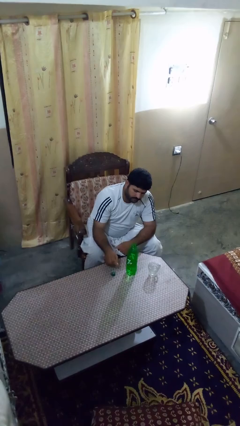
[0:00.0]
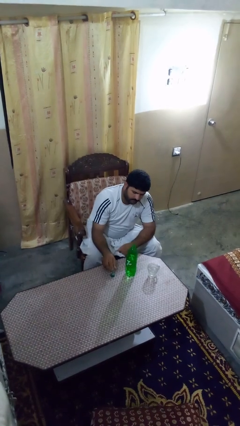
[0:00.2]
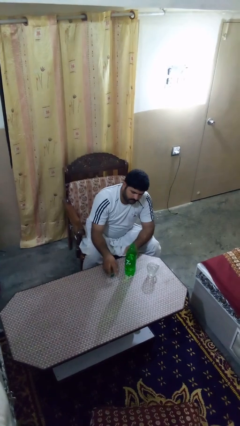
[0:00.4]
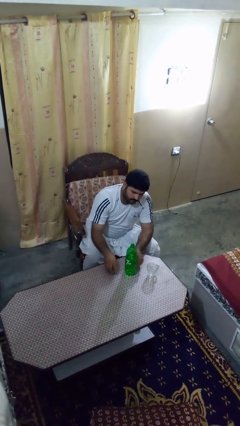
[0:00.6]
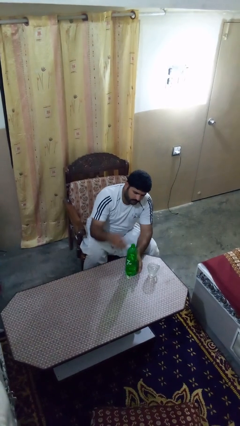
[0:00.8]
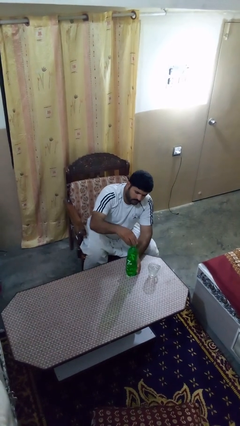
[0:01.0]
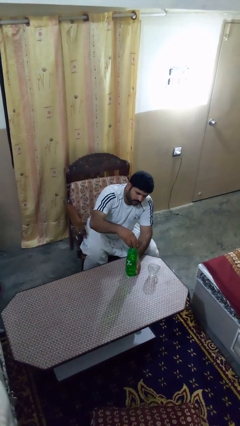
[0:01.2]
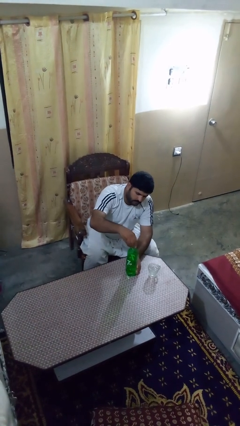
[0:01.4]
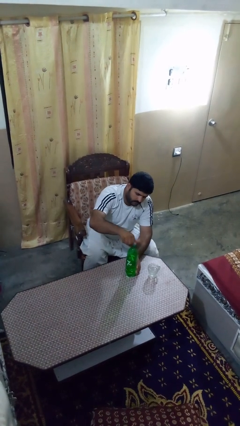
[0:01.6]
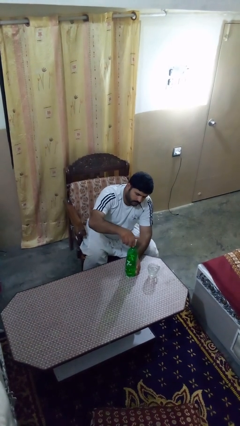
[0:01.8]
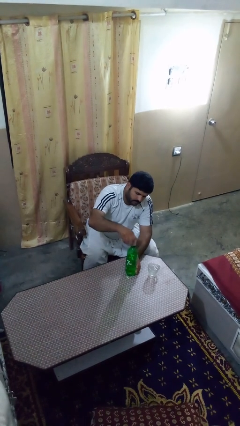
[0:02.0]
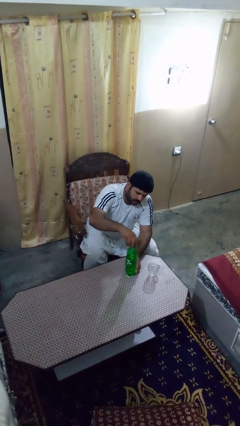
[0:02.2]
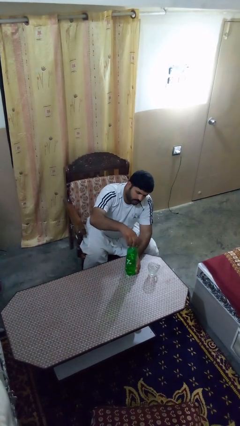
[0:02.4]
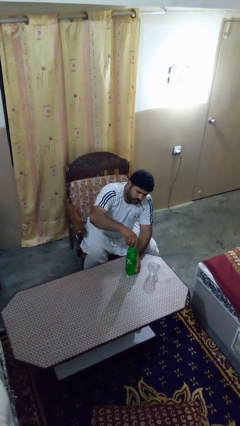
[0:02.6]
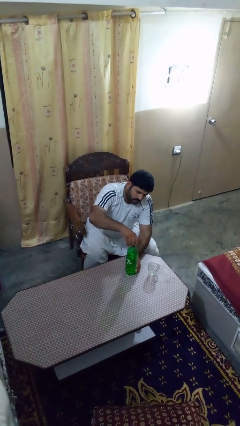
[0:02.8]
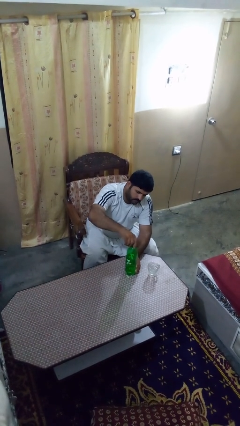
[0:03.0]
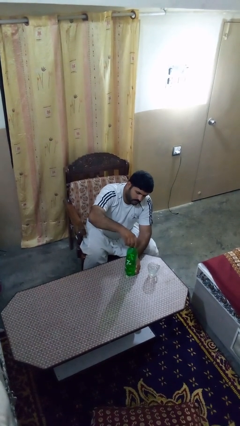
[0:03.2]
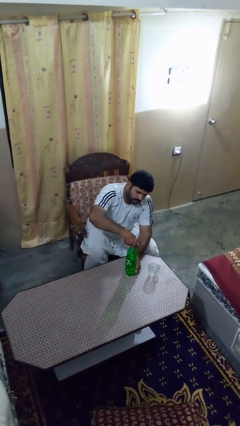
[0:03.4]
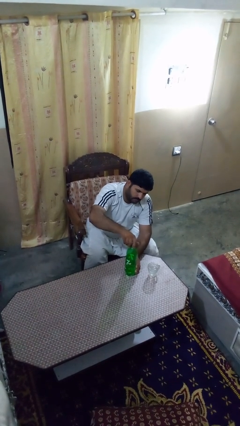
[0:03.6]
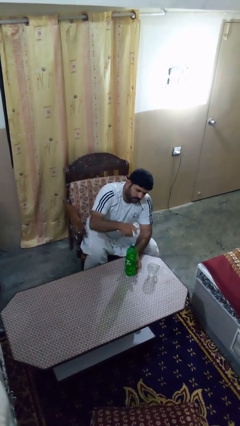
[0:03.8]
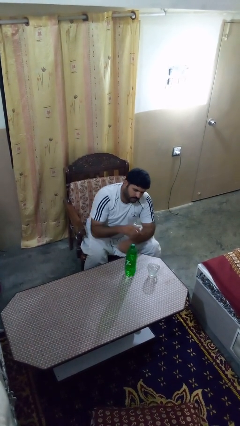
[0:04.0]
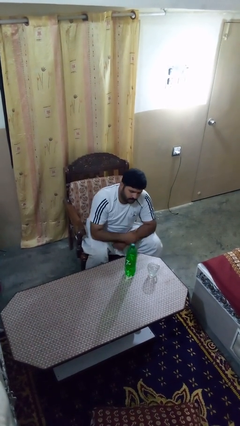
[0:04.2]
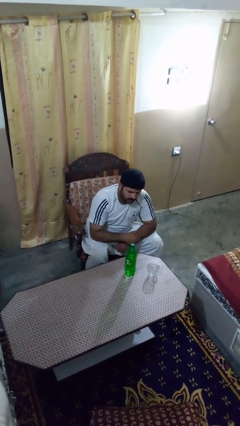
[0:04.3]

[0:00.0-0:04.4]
person screws lid to bottle

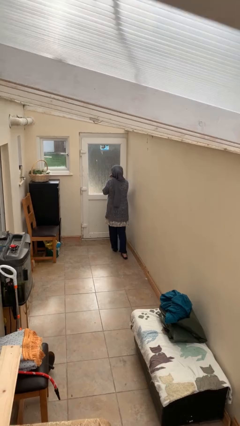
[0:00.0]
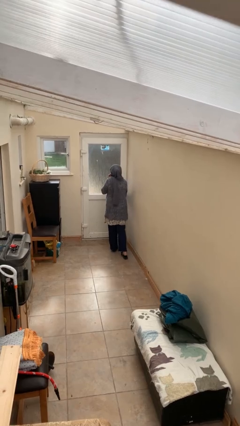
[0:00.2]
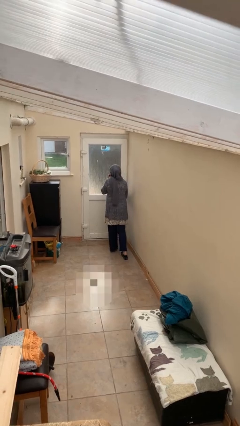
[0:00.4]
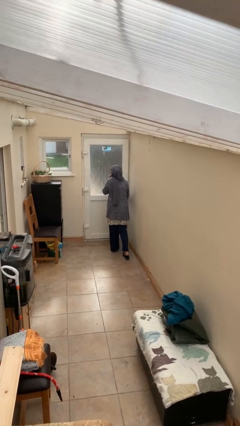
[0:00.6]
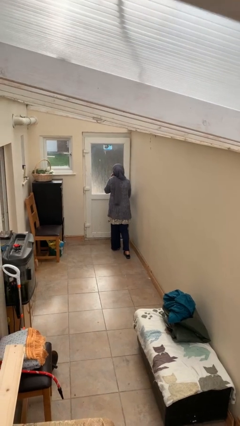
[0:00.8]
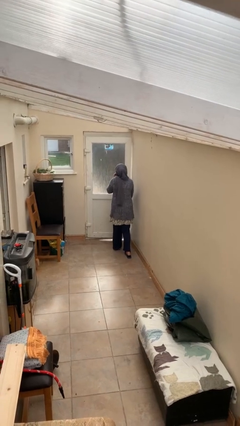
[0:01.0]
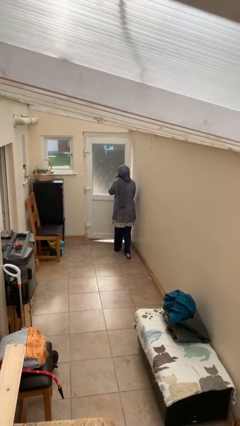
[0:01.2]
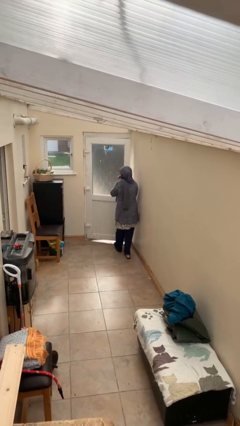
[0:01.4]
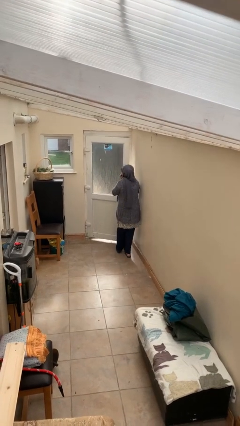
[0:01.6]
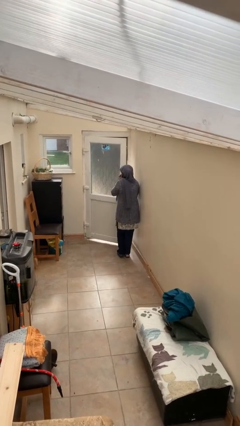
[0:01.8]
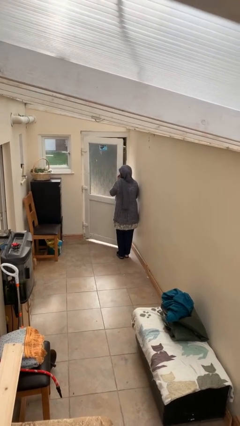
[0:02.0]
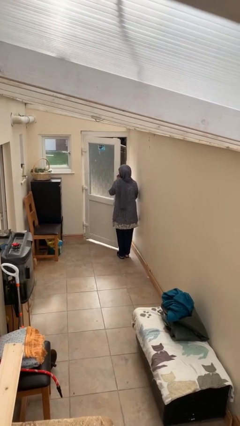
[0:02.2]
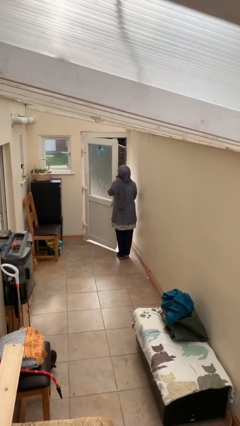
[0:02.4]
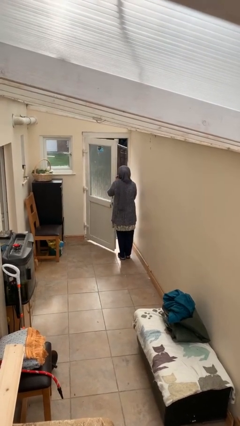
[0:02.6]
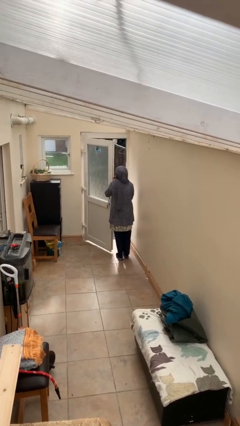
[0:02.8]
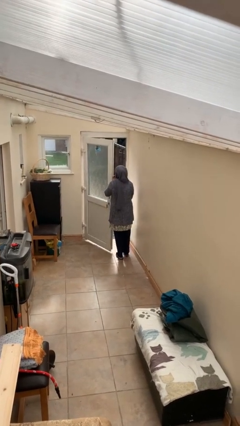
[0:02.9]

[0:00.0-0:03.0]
person opens facility door

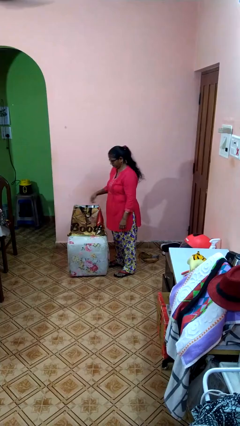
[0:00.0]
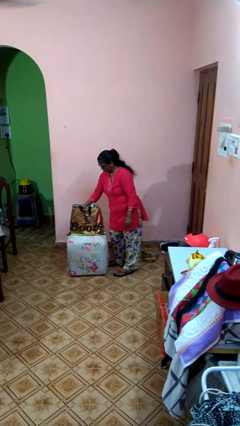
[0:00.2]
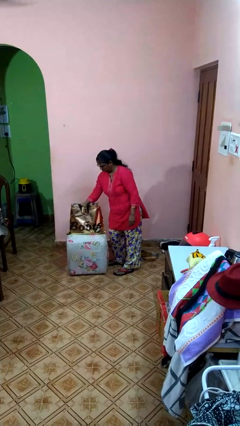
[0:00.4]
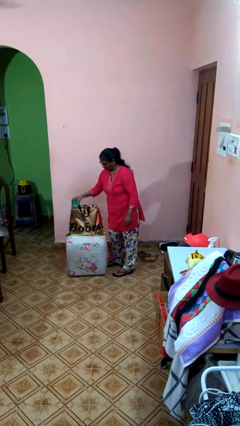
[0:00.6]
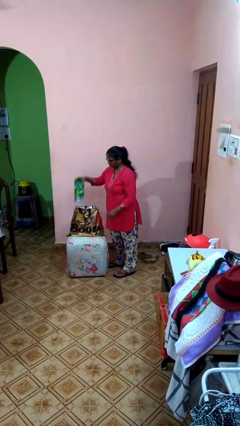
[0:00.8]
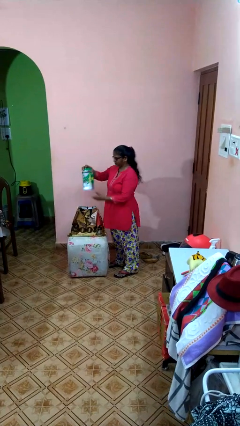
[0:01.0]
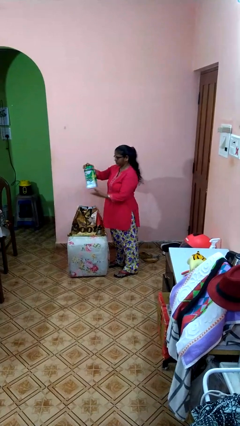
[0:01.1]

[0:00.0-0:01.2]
person takes object from bag

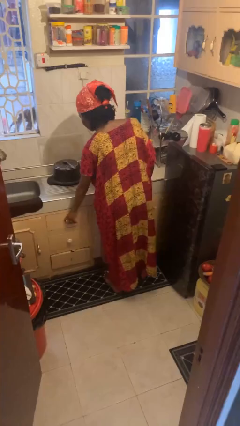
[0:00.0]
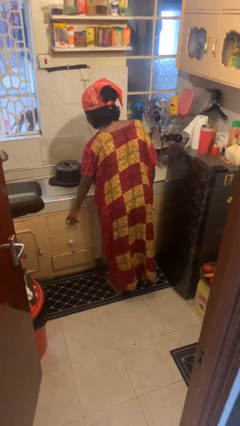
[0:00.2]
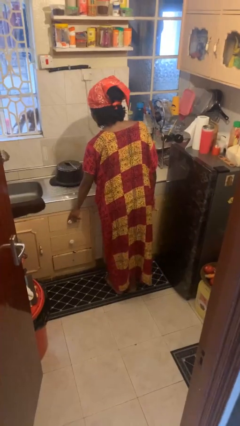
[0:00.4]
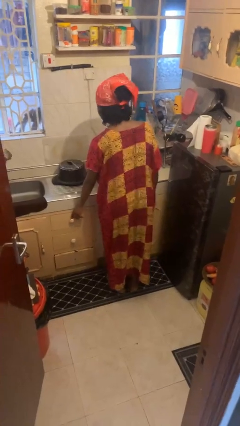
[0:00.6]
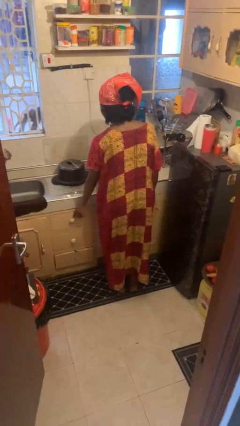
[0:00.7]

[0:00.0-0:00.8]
person closes kitchen drawer

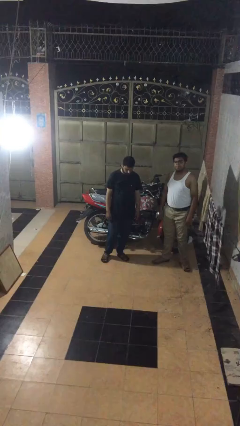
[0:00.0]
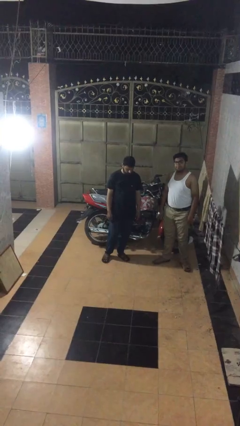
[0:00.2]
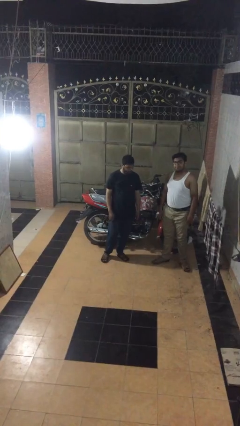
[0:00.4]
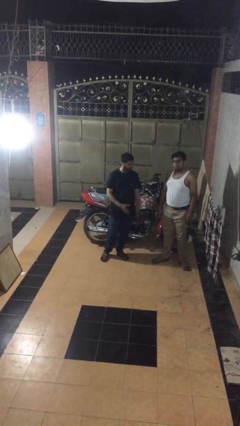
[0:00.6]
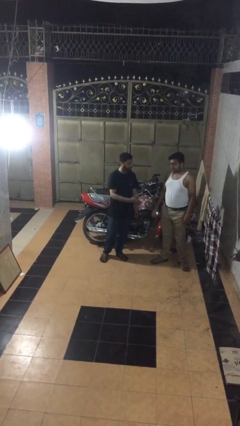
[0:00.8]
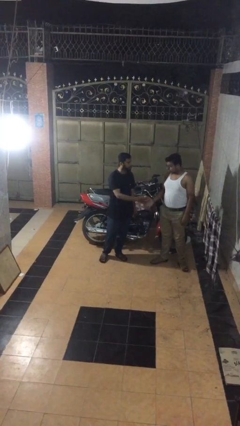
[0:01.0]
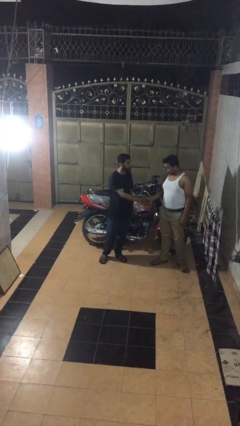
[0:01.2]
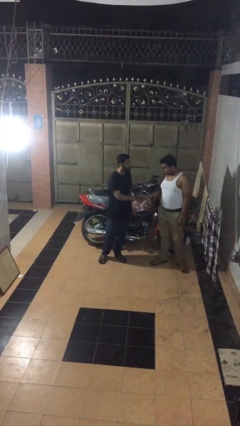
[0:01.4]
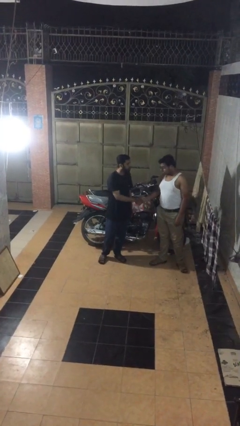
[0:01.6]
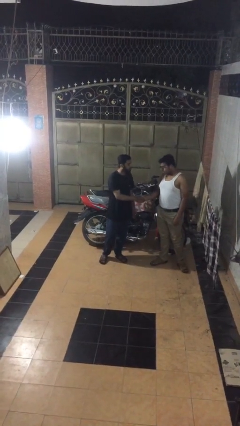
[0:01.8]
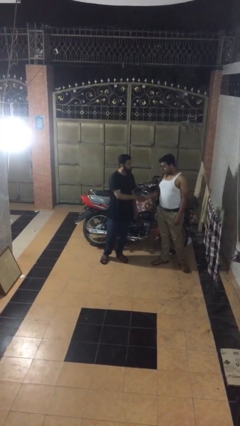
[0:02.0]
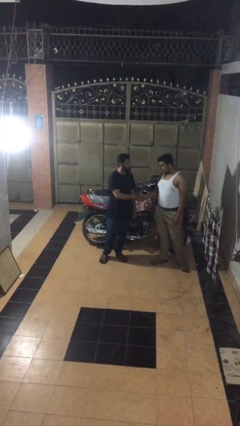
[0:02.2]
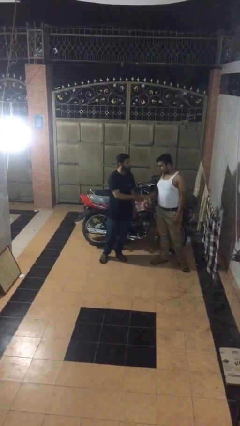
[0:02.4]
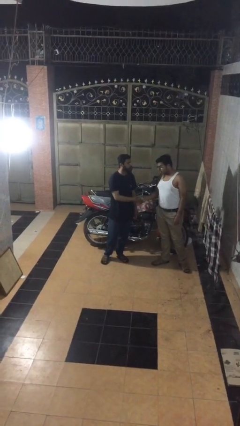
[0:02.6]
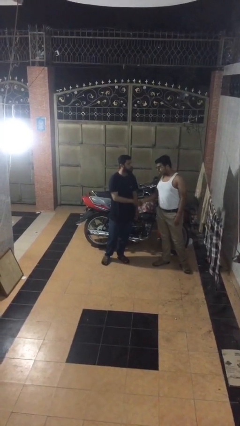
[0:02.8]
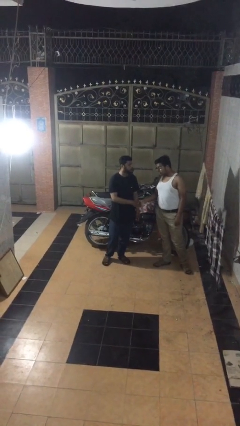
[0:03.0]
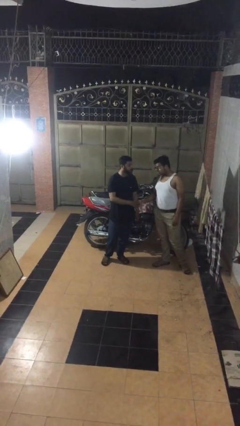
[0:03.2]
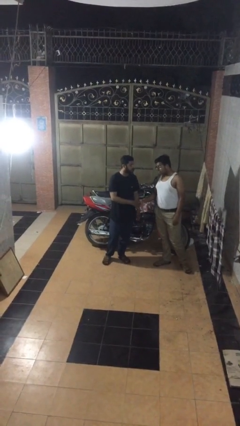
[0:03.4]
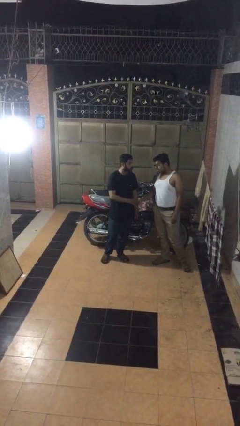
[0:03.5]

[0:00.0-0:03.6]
person shakes hand

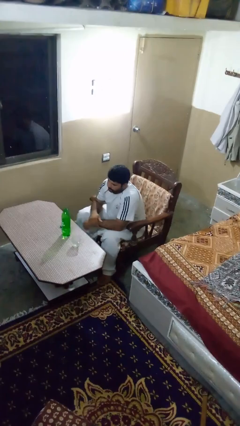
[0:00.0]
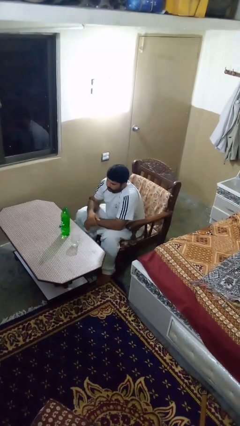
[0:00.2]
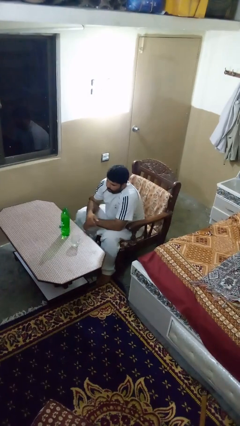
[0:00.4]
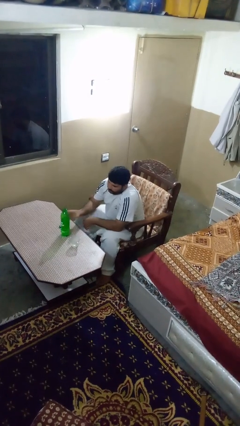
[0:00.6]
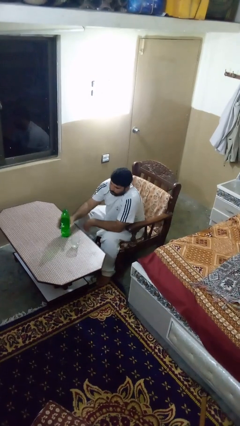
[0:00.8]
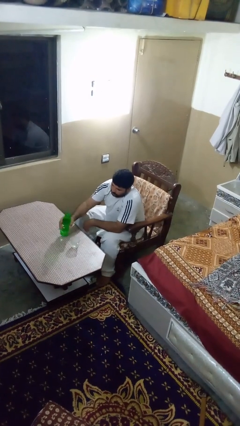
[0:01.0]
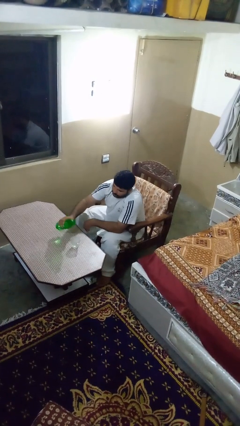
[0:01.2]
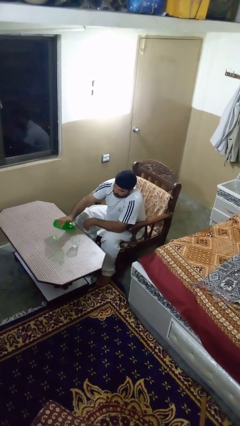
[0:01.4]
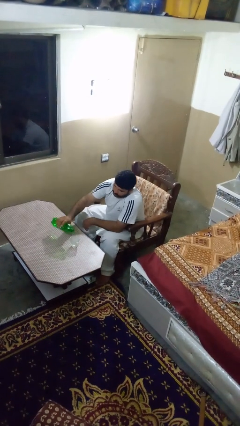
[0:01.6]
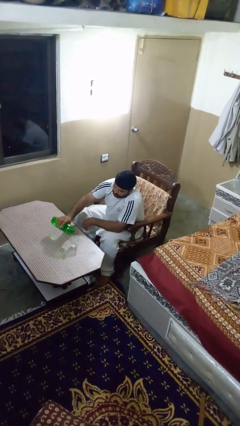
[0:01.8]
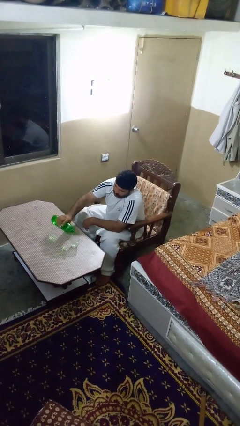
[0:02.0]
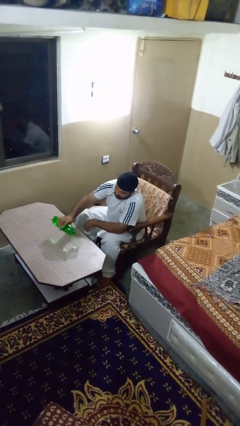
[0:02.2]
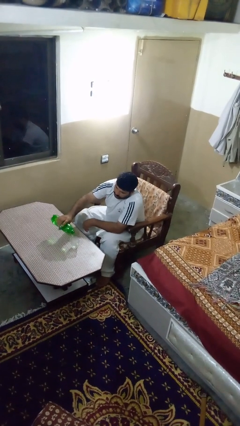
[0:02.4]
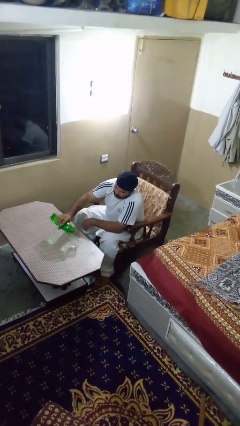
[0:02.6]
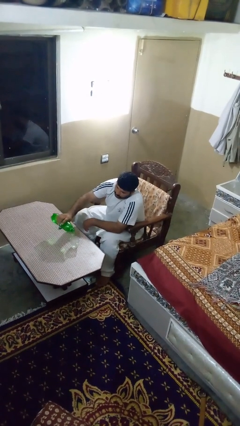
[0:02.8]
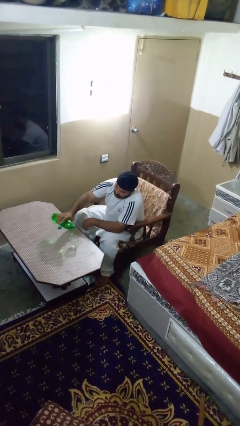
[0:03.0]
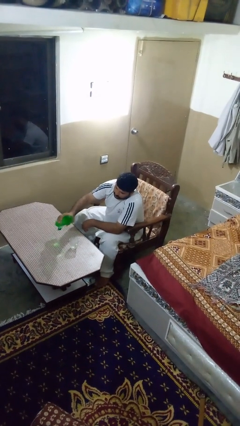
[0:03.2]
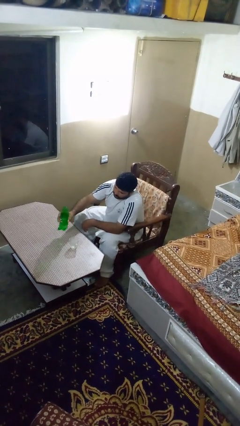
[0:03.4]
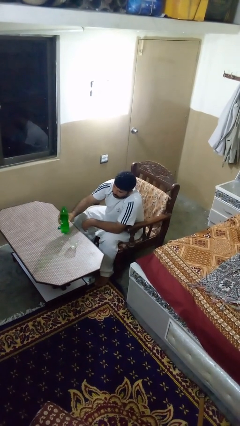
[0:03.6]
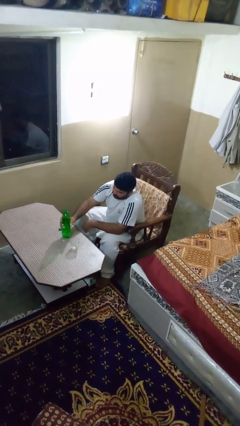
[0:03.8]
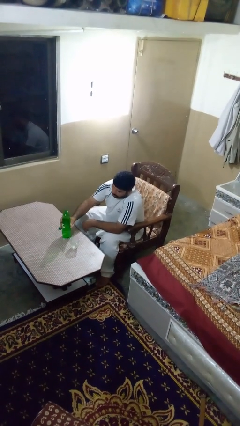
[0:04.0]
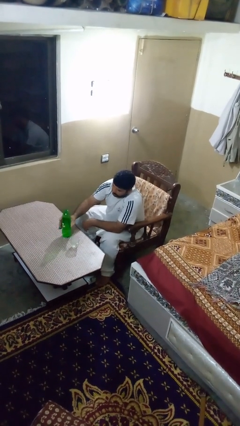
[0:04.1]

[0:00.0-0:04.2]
person pours liquid into cup
